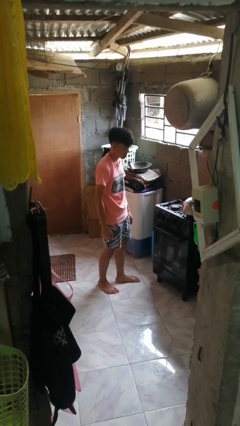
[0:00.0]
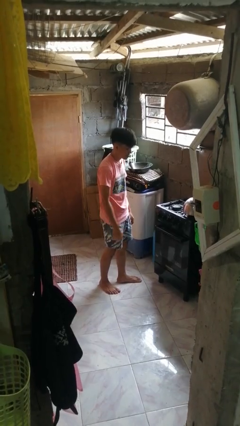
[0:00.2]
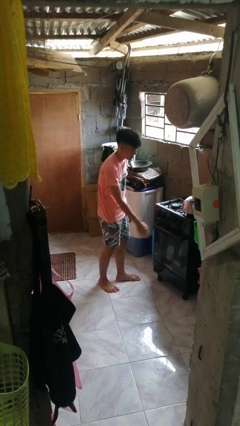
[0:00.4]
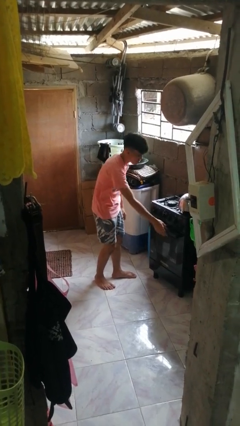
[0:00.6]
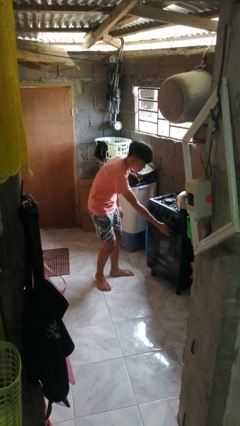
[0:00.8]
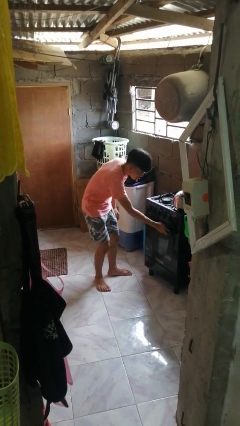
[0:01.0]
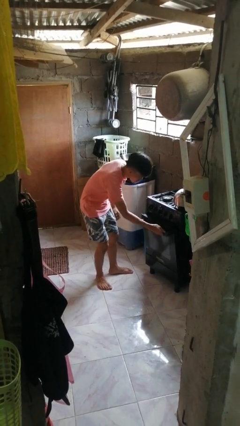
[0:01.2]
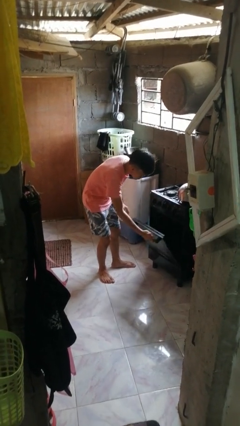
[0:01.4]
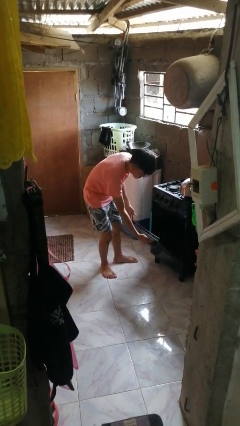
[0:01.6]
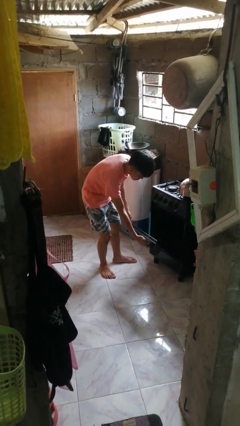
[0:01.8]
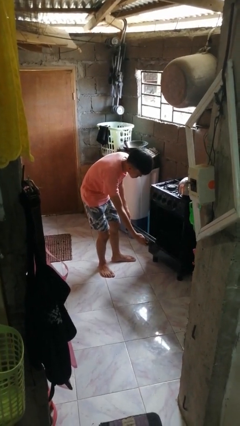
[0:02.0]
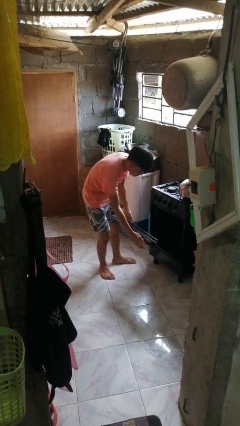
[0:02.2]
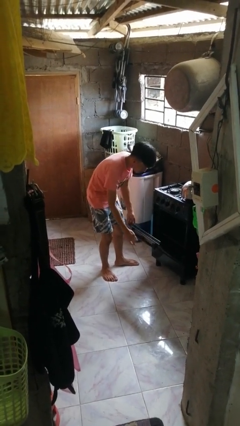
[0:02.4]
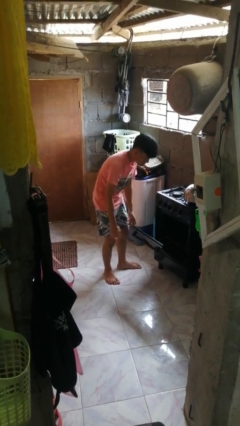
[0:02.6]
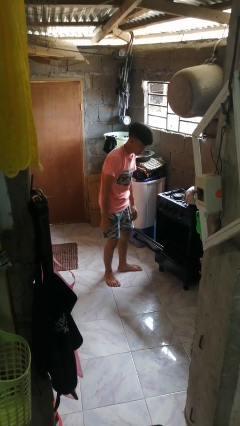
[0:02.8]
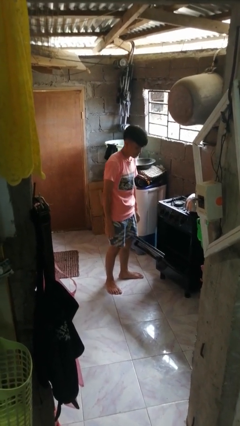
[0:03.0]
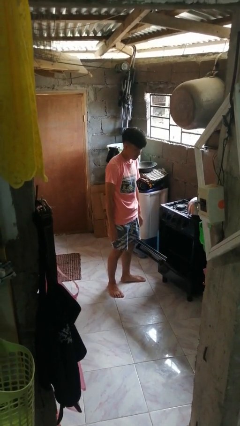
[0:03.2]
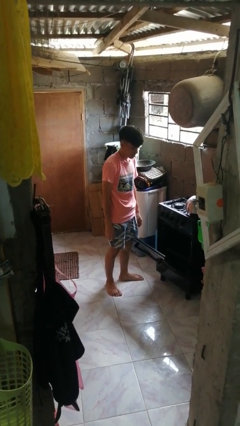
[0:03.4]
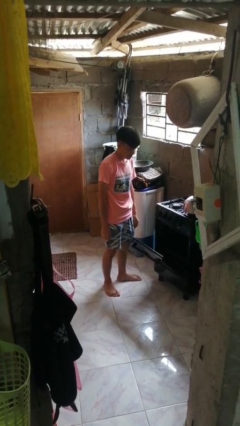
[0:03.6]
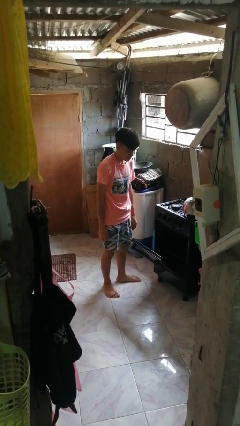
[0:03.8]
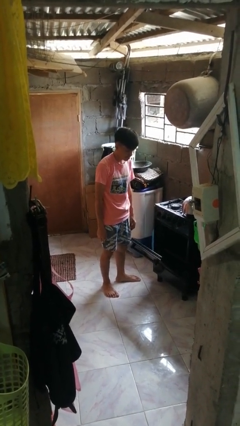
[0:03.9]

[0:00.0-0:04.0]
person opens oven door

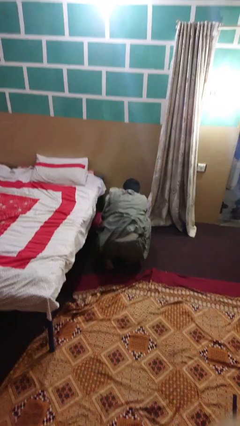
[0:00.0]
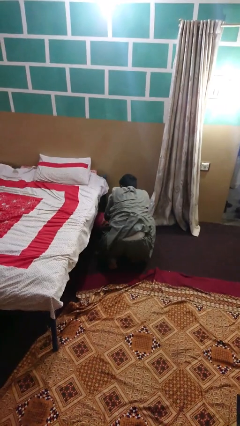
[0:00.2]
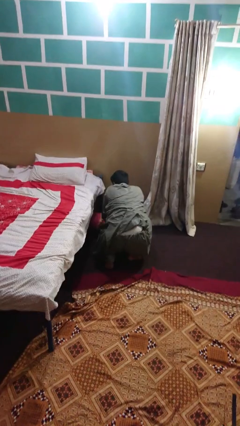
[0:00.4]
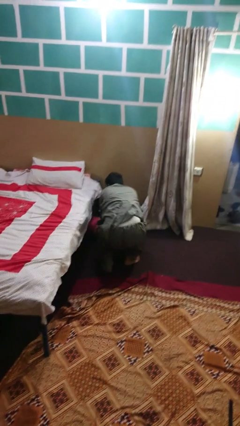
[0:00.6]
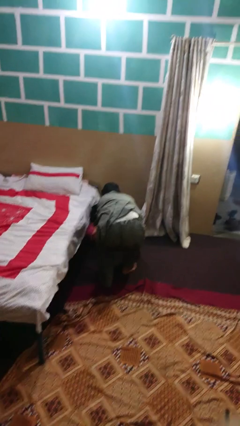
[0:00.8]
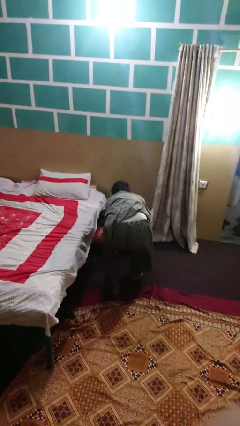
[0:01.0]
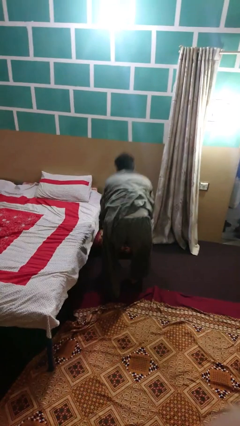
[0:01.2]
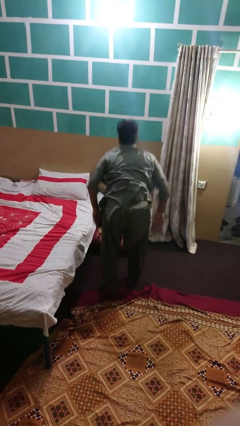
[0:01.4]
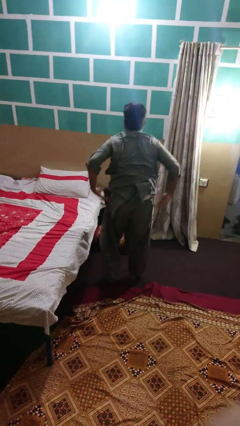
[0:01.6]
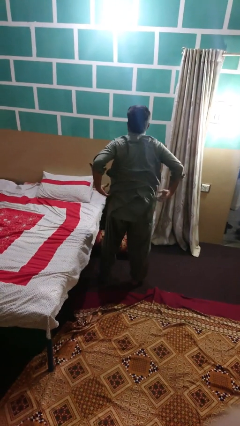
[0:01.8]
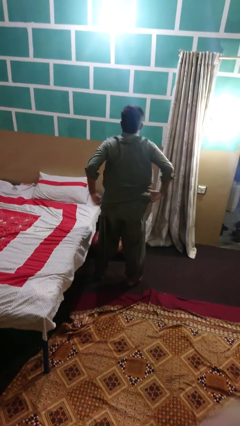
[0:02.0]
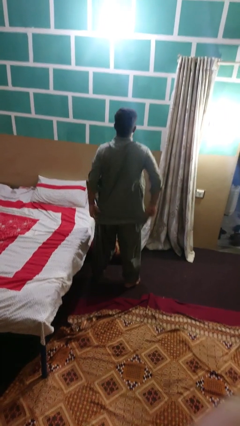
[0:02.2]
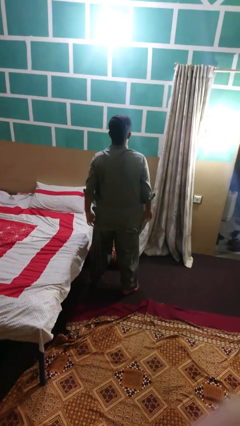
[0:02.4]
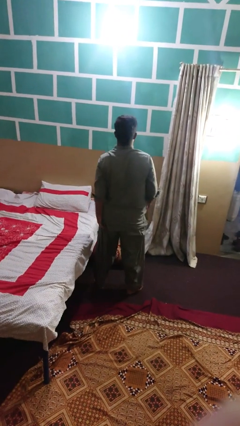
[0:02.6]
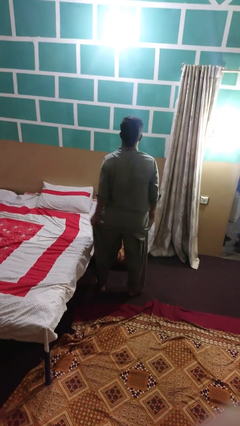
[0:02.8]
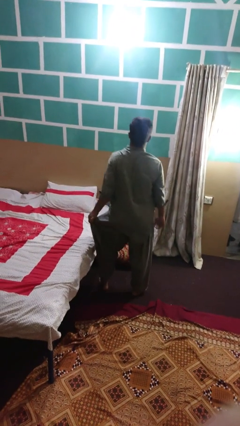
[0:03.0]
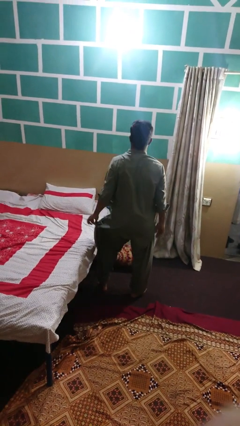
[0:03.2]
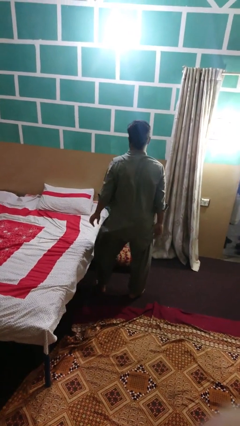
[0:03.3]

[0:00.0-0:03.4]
person stands up from floor

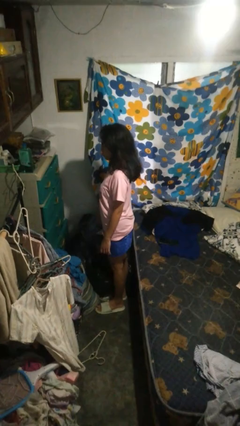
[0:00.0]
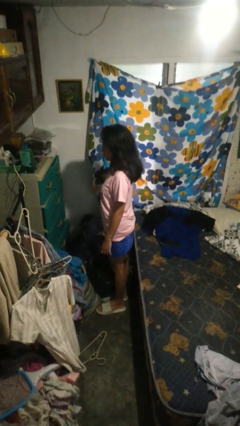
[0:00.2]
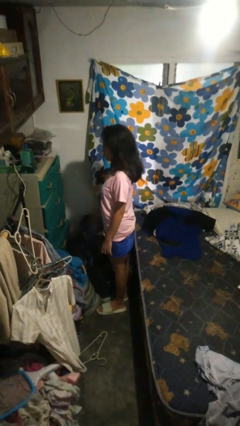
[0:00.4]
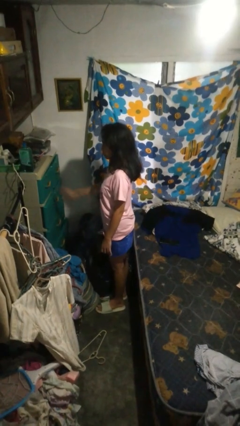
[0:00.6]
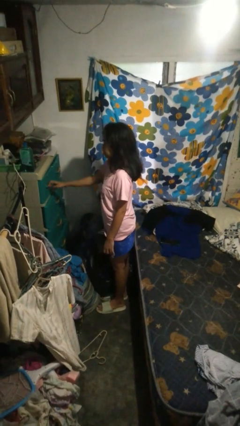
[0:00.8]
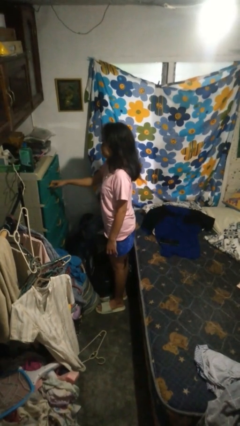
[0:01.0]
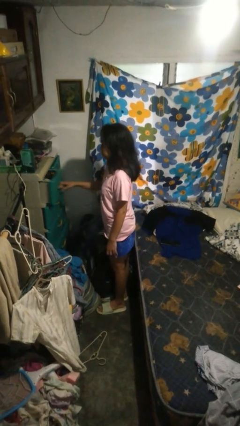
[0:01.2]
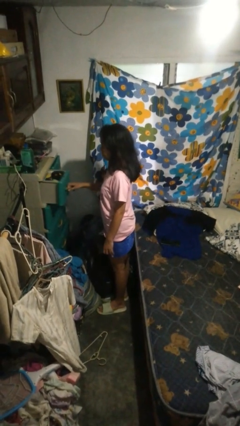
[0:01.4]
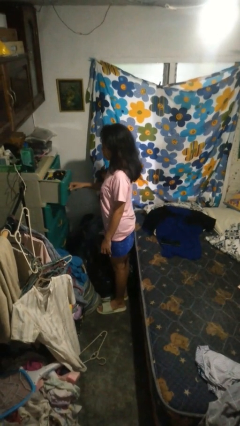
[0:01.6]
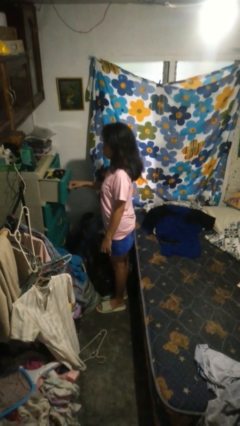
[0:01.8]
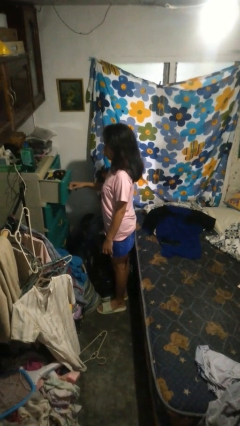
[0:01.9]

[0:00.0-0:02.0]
person opens dresser drawer

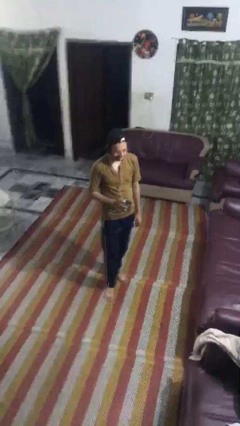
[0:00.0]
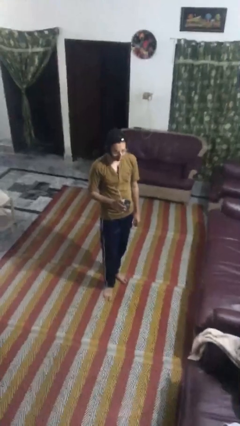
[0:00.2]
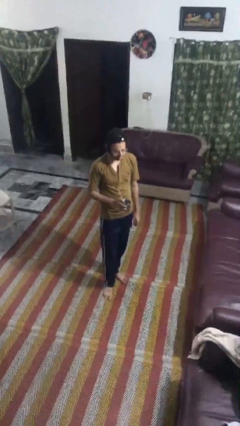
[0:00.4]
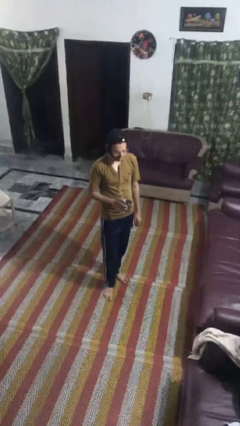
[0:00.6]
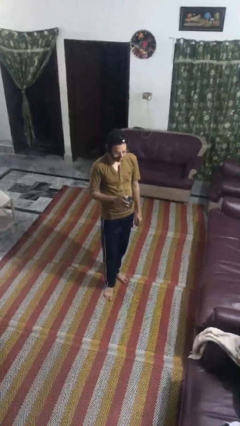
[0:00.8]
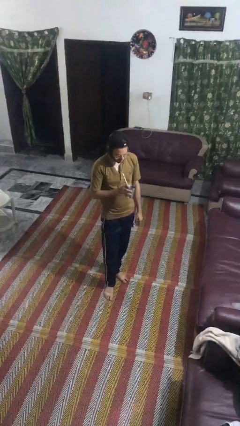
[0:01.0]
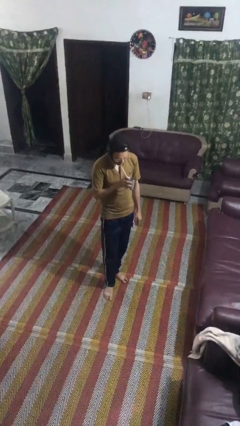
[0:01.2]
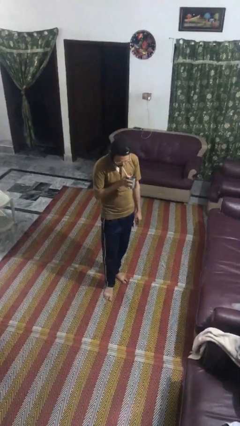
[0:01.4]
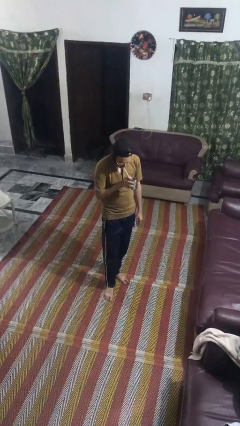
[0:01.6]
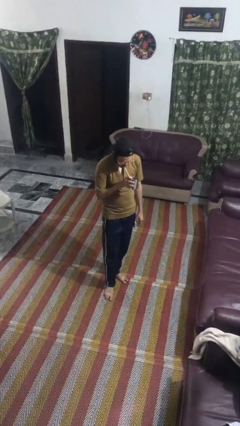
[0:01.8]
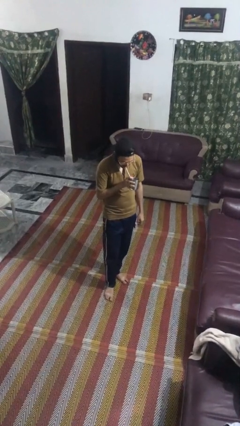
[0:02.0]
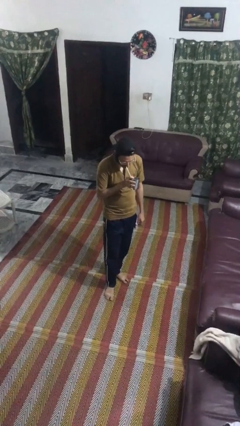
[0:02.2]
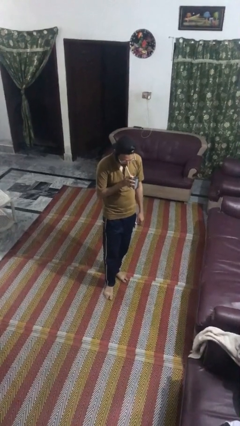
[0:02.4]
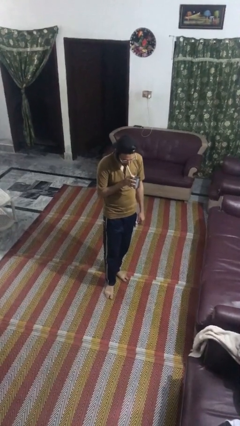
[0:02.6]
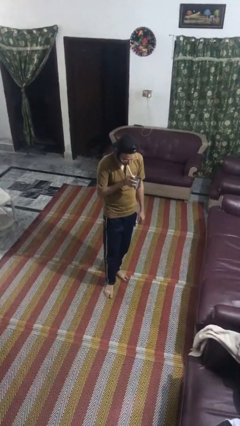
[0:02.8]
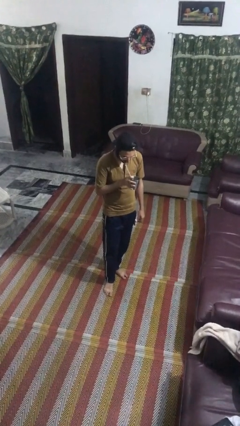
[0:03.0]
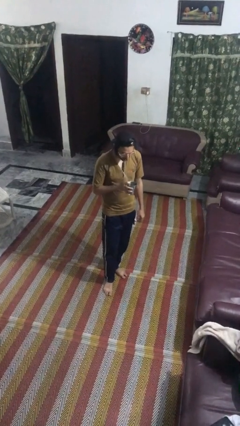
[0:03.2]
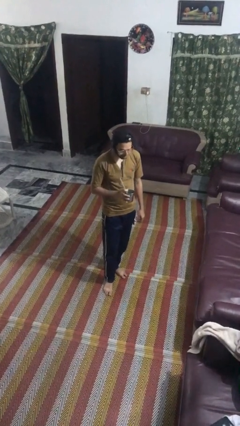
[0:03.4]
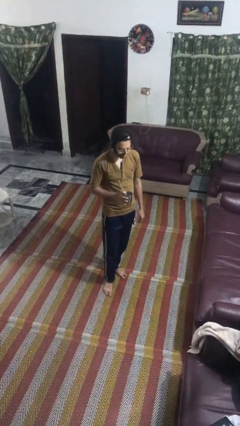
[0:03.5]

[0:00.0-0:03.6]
person drinks from straw

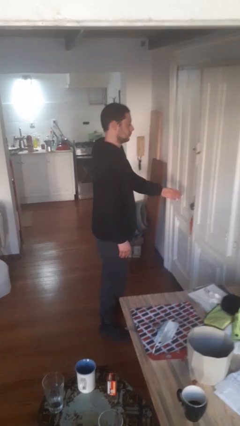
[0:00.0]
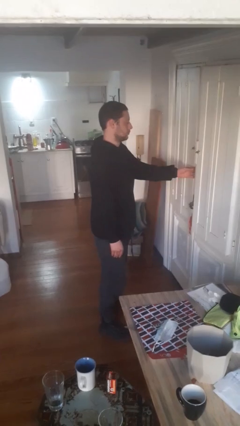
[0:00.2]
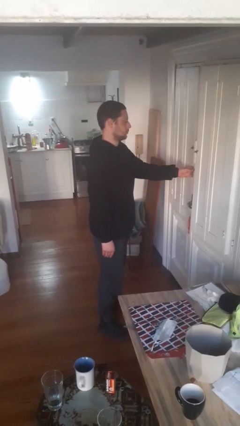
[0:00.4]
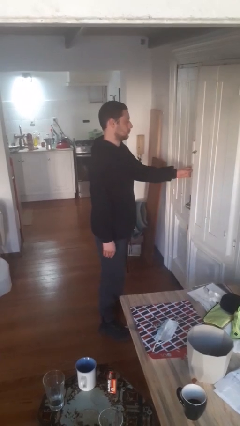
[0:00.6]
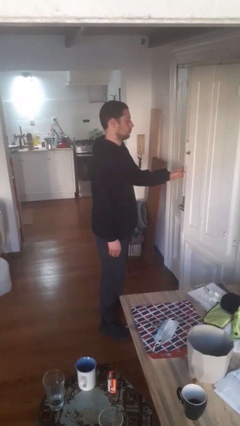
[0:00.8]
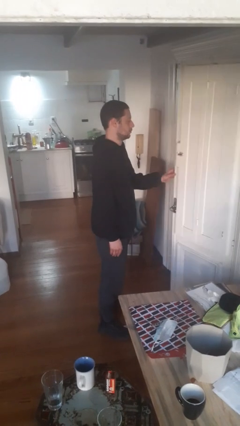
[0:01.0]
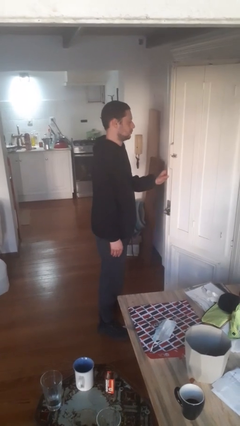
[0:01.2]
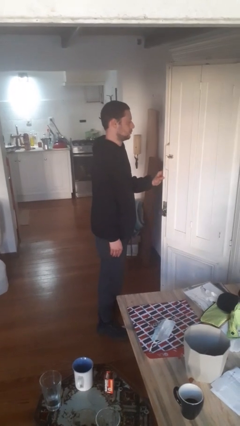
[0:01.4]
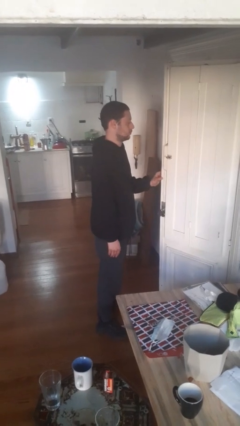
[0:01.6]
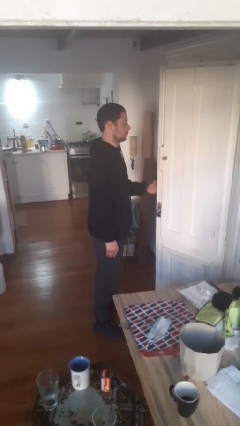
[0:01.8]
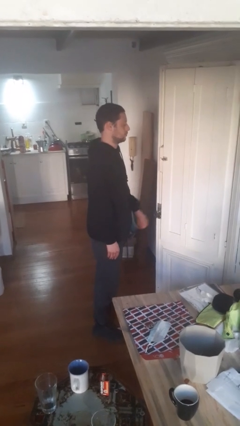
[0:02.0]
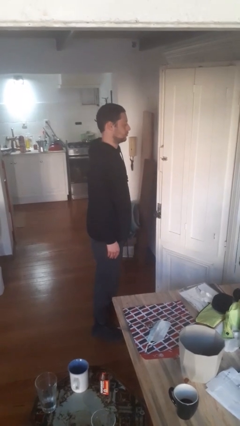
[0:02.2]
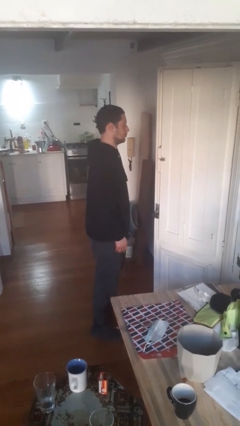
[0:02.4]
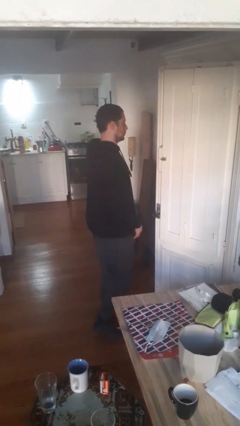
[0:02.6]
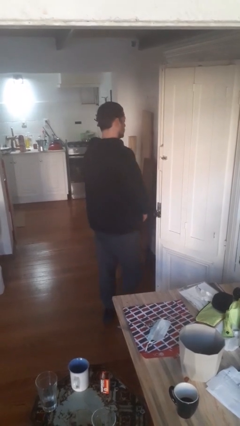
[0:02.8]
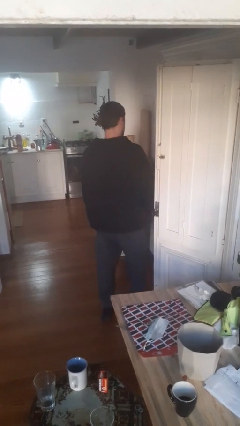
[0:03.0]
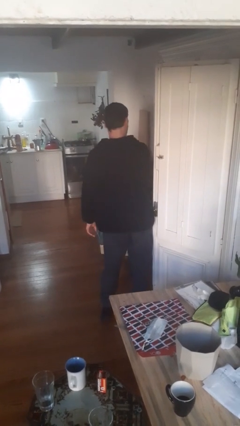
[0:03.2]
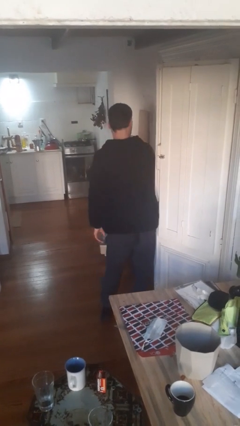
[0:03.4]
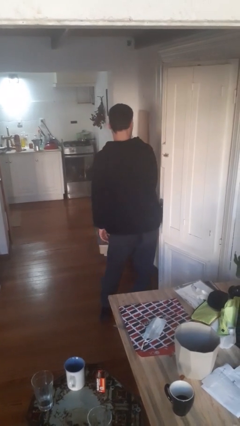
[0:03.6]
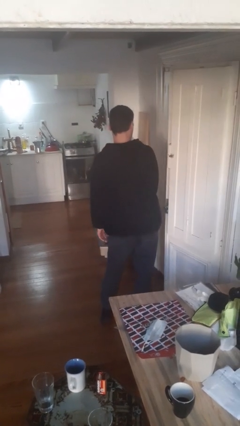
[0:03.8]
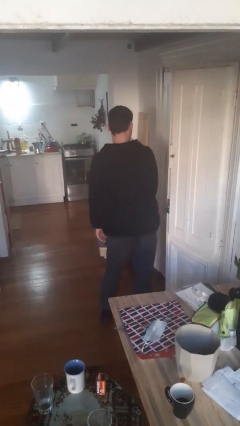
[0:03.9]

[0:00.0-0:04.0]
person opens facility door

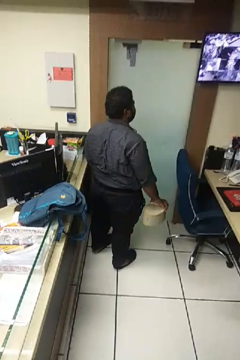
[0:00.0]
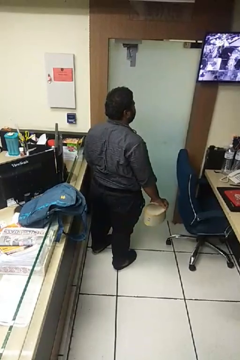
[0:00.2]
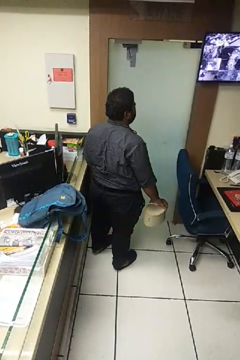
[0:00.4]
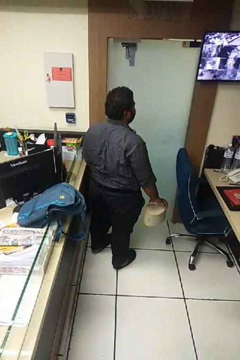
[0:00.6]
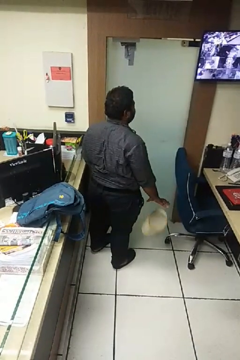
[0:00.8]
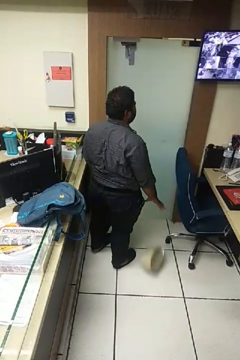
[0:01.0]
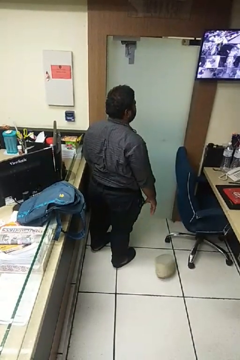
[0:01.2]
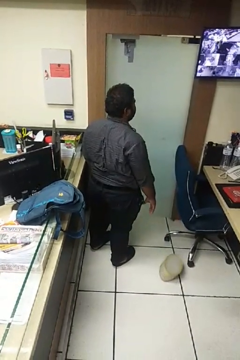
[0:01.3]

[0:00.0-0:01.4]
person drops object
